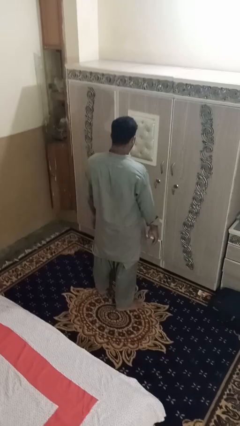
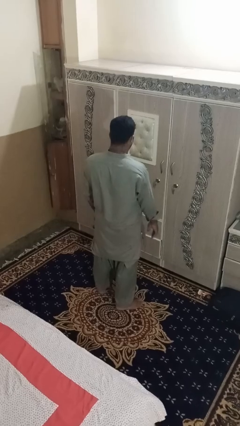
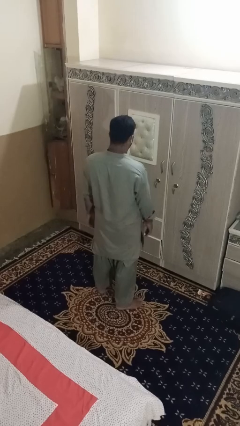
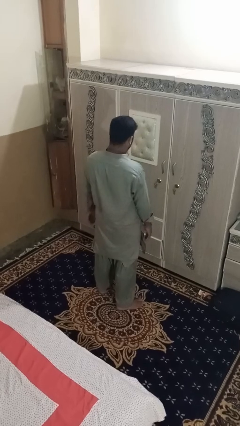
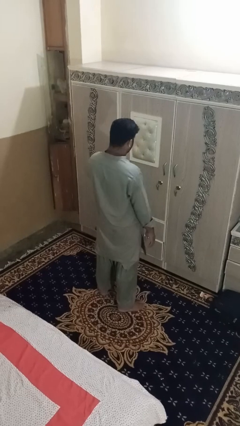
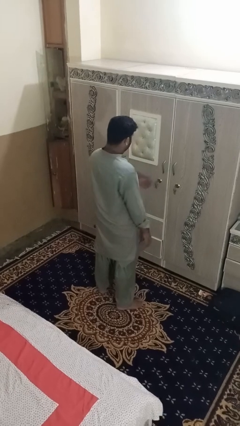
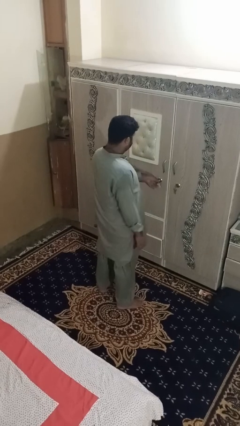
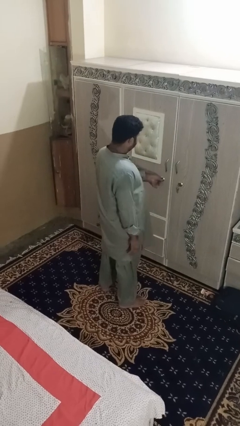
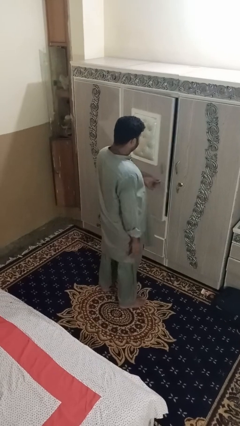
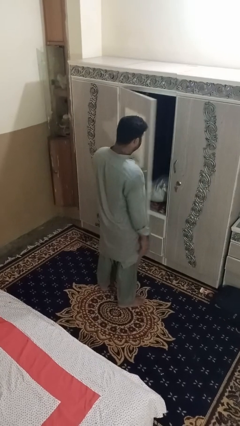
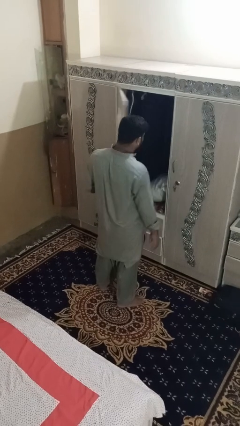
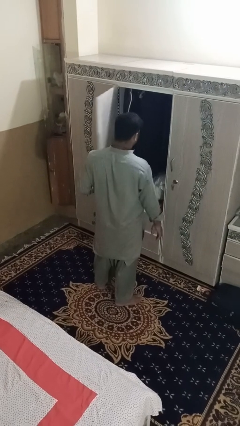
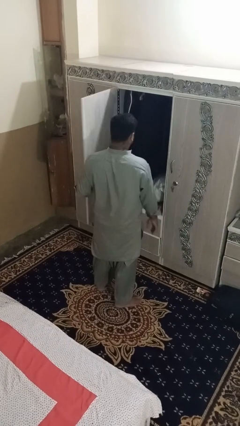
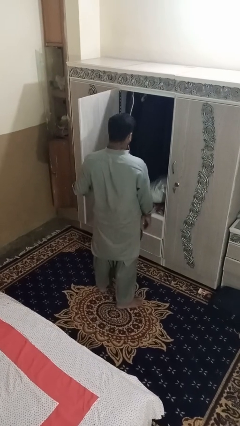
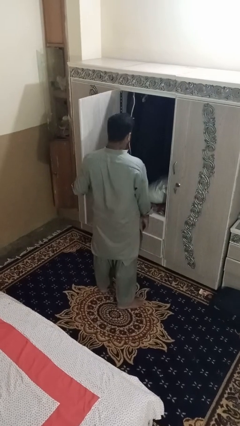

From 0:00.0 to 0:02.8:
person opens dresser drawer

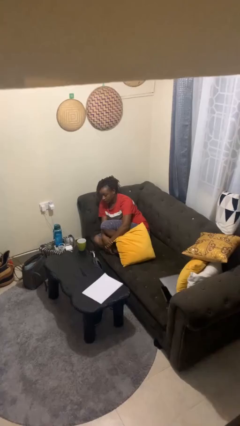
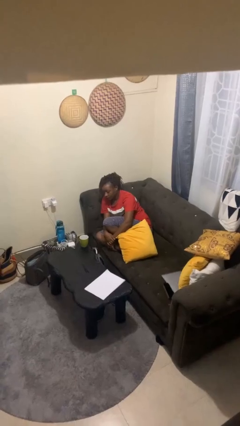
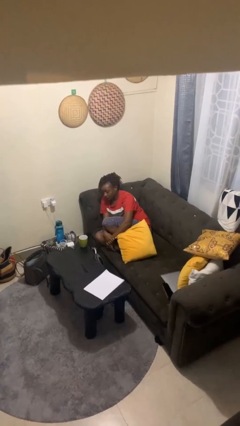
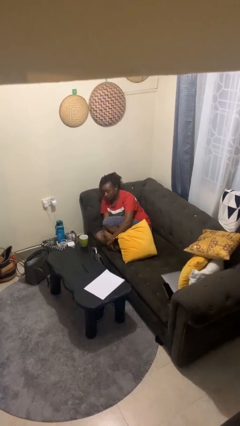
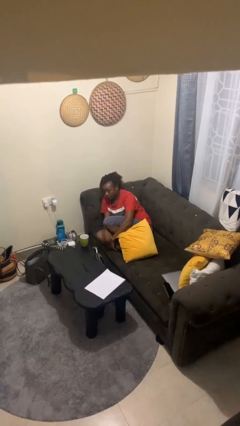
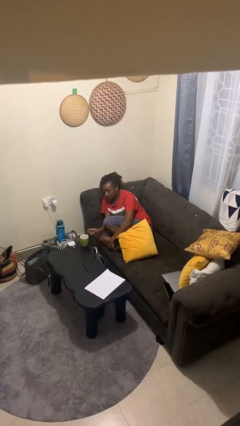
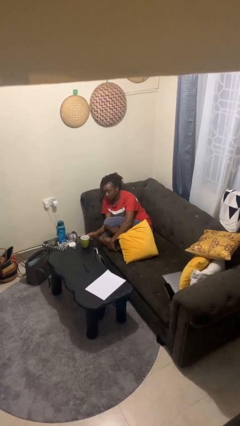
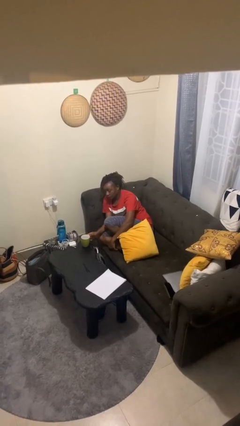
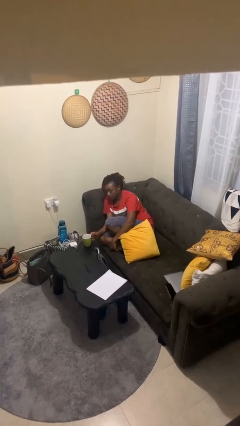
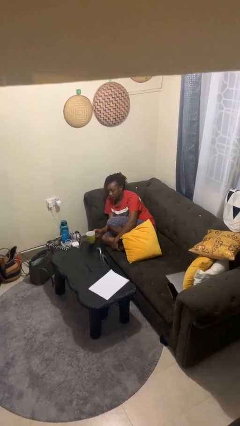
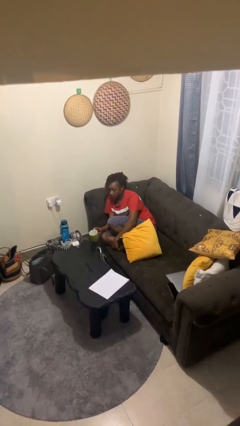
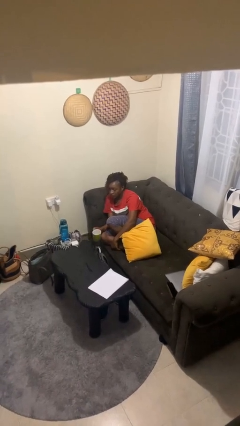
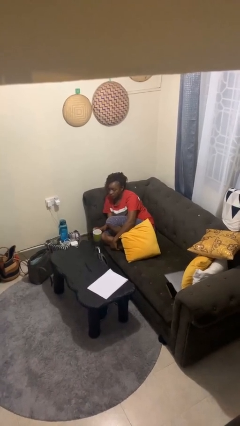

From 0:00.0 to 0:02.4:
person picks up object from table

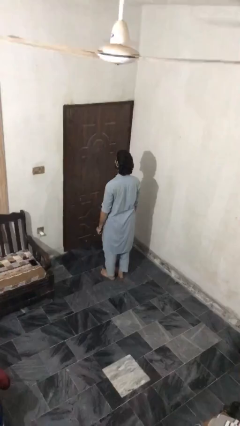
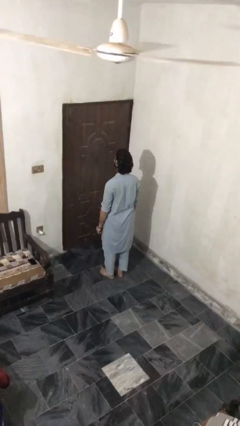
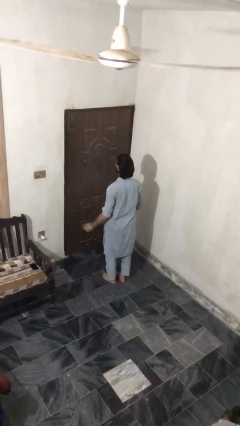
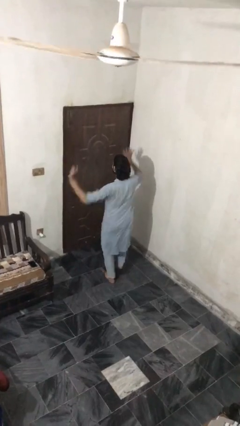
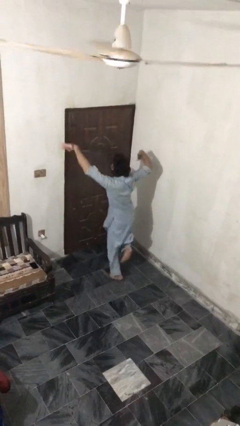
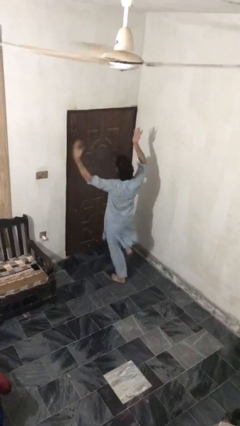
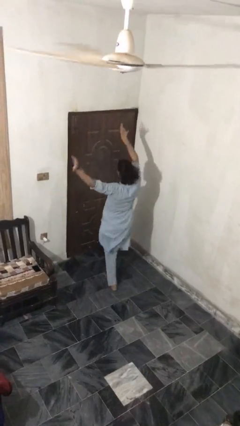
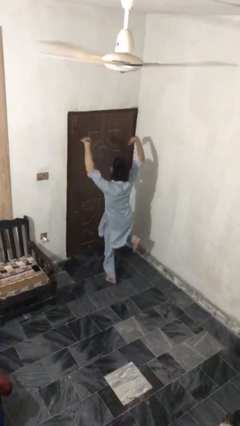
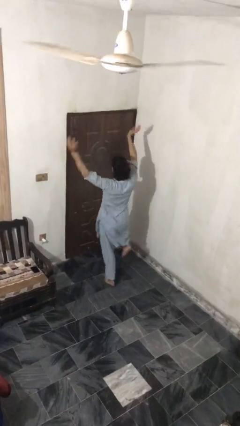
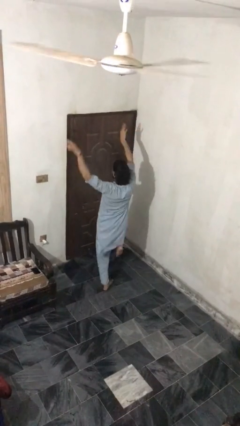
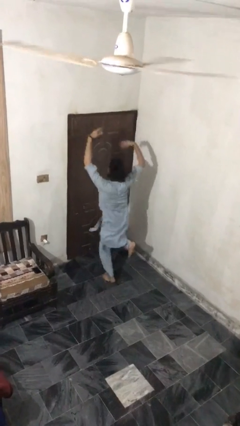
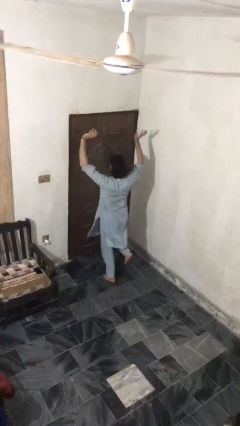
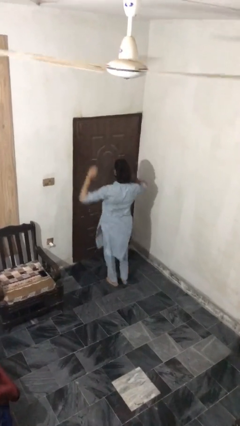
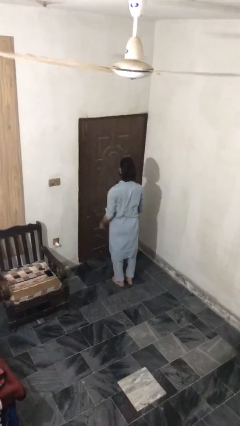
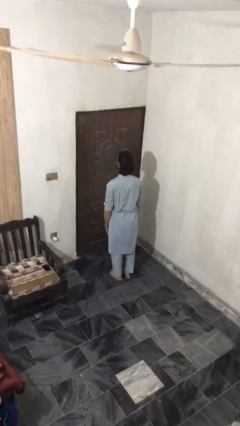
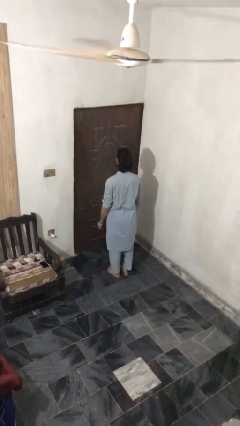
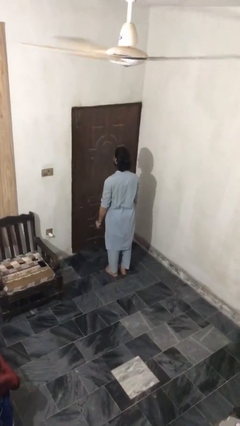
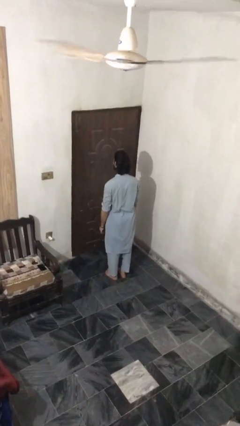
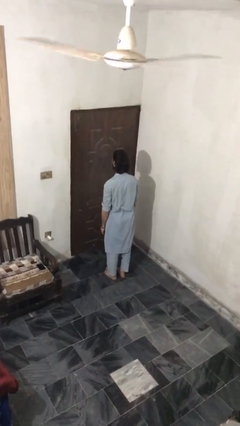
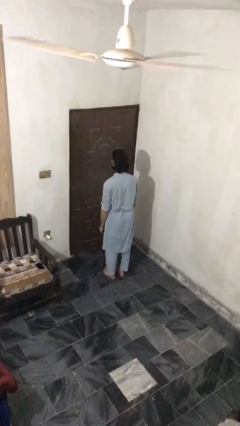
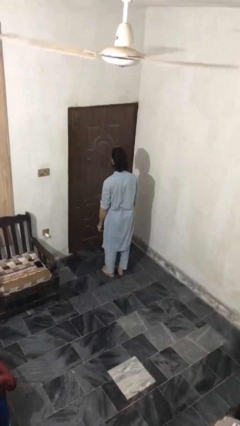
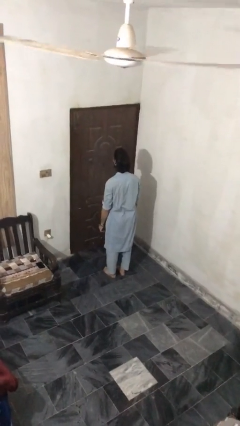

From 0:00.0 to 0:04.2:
person dances in place

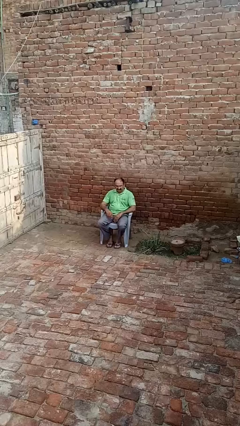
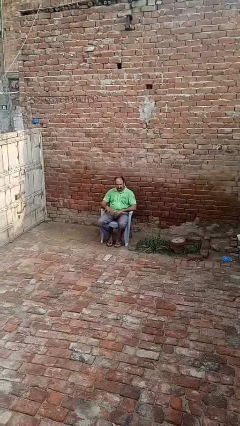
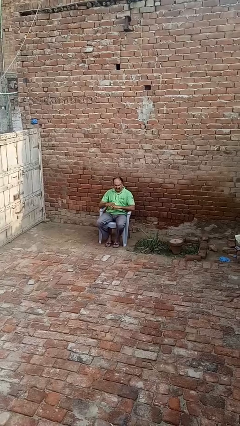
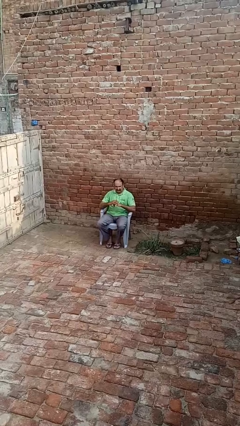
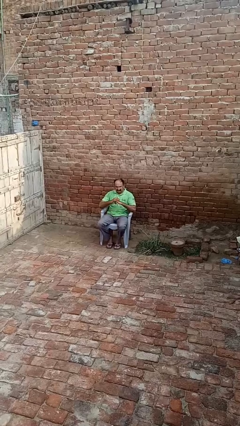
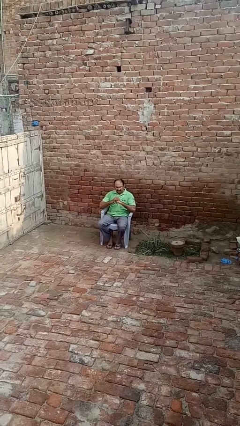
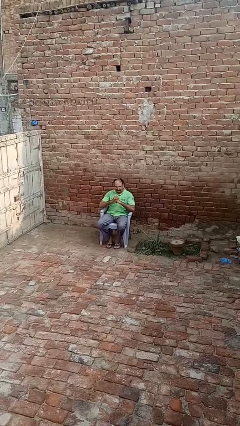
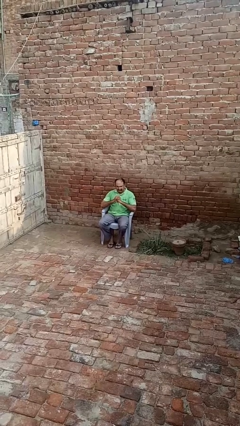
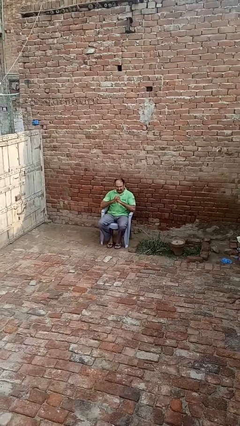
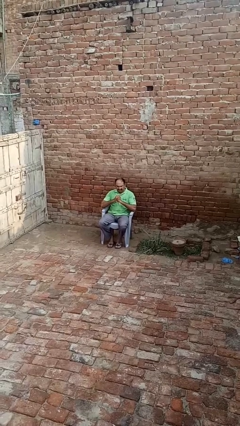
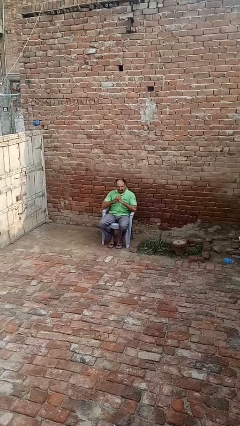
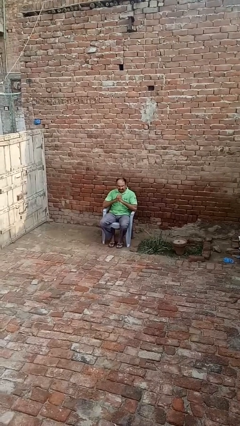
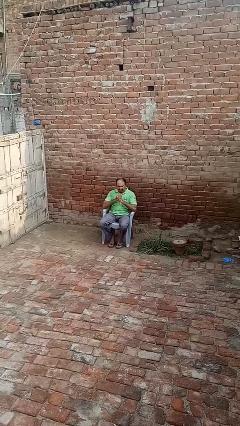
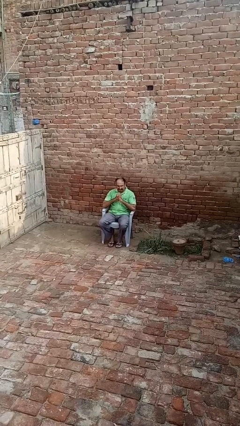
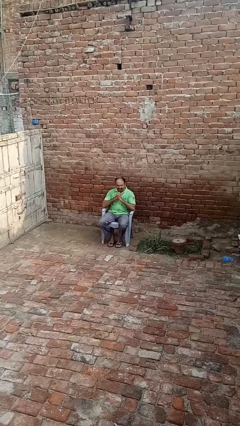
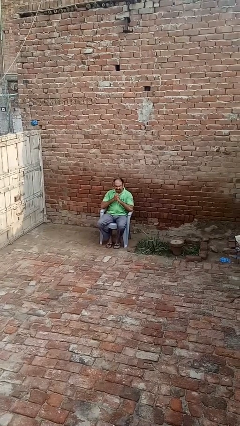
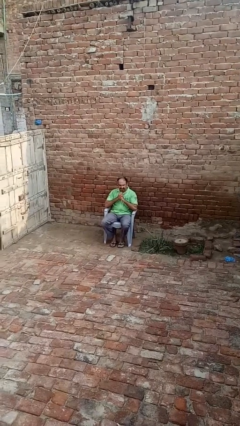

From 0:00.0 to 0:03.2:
person cracks knuckles

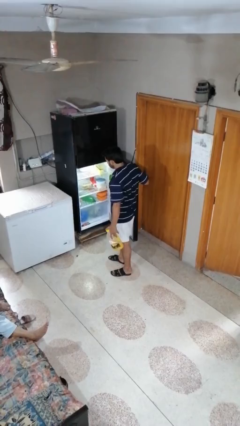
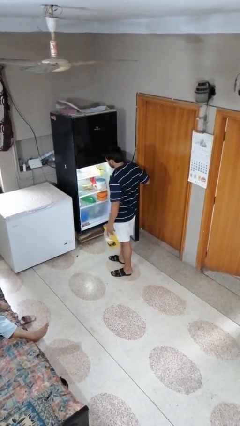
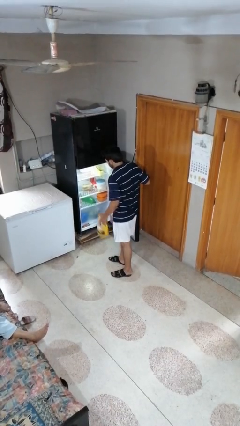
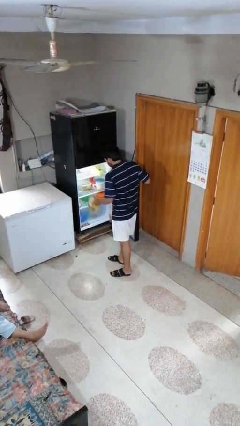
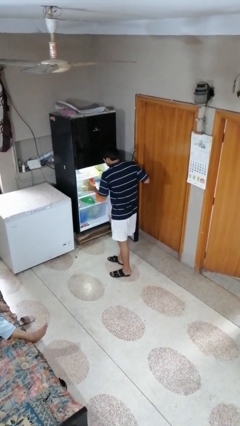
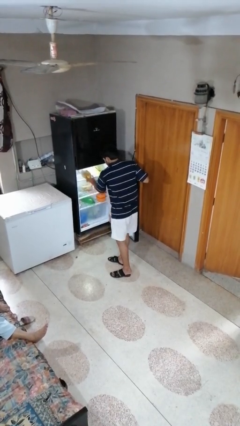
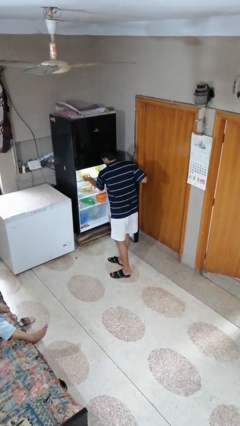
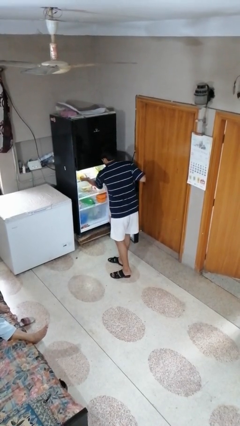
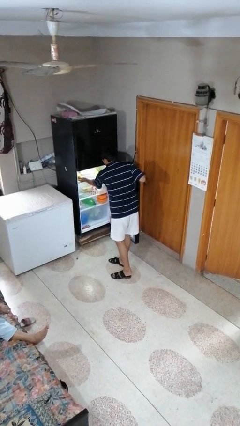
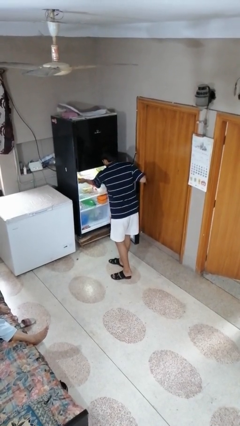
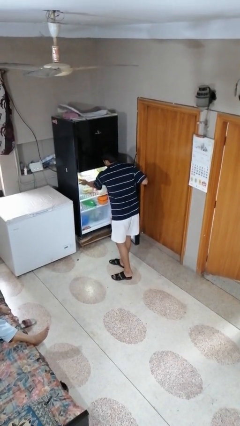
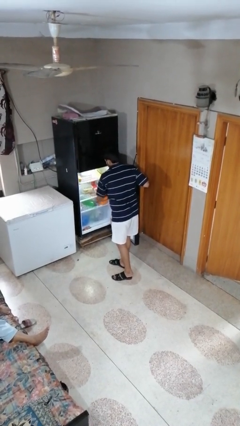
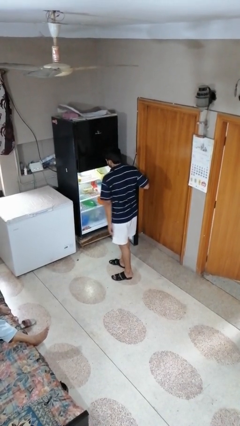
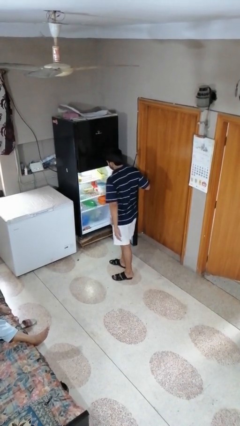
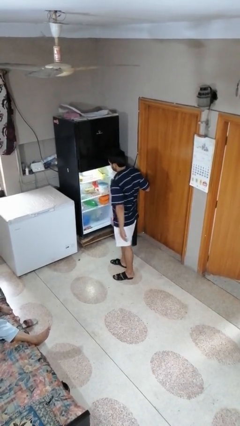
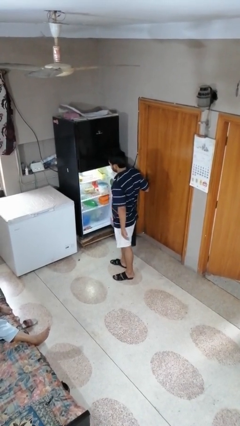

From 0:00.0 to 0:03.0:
person puts object into refrigerator

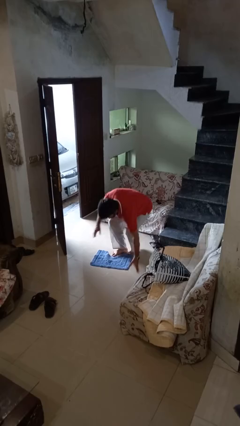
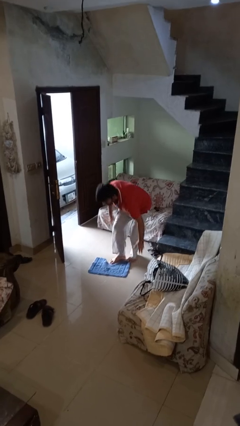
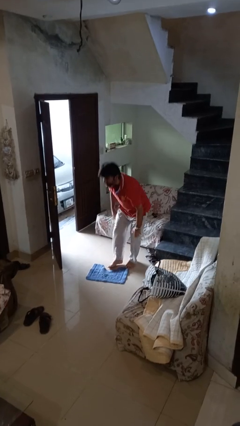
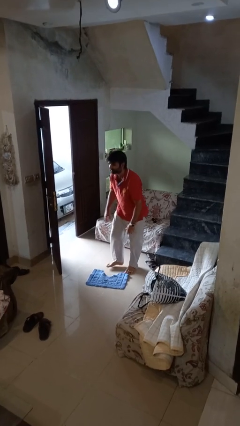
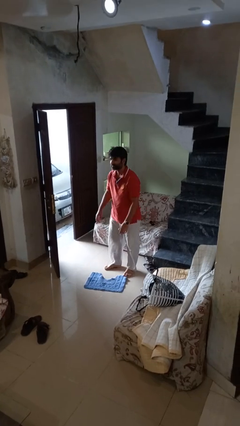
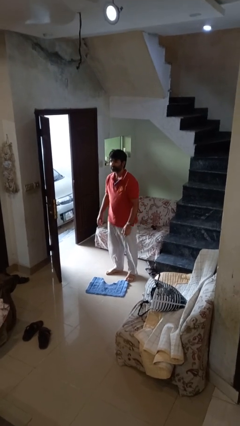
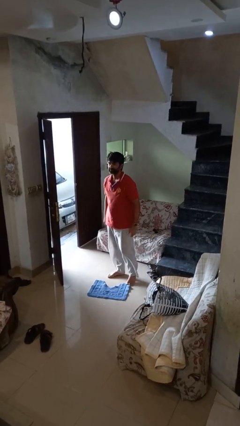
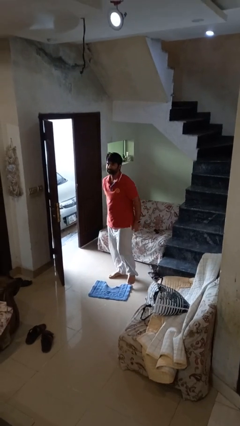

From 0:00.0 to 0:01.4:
person stands up from floor

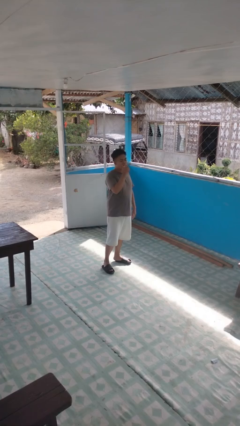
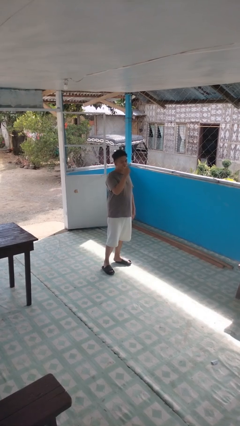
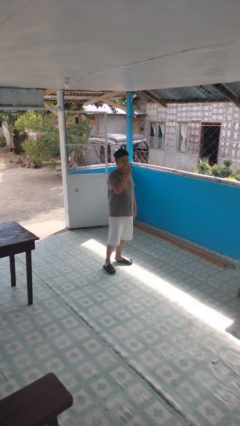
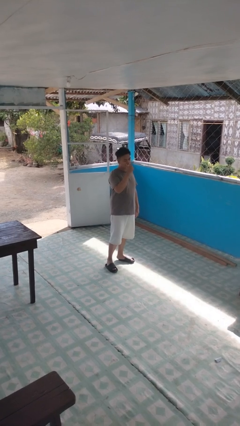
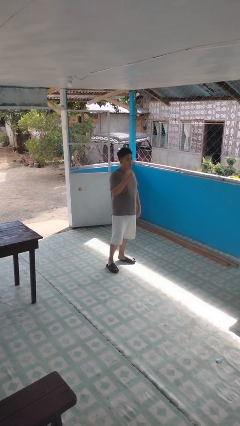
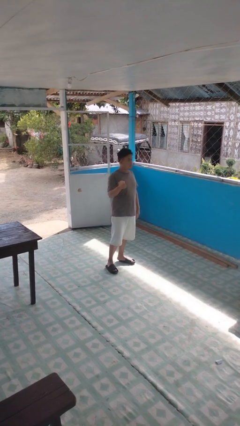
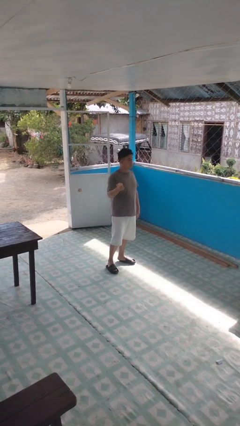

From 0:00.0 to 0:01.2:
person eats apple
